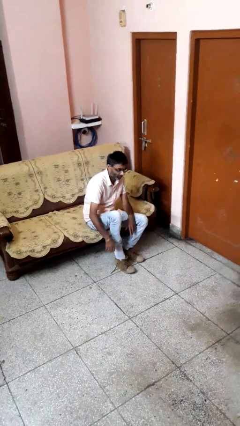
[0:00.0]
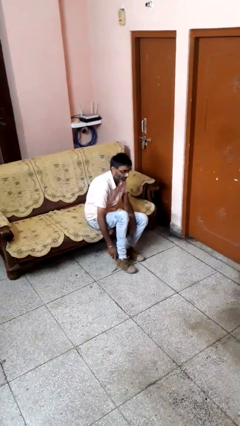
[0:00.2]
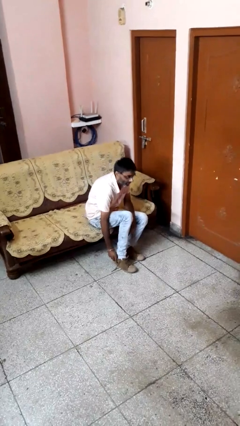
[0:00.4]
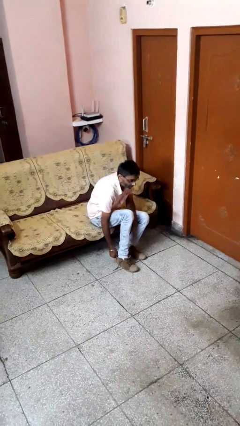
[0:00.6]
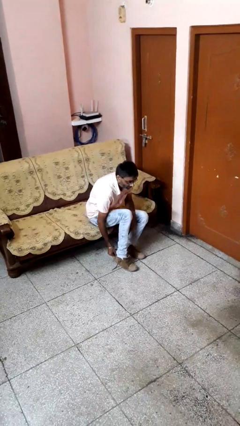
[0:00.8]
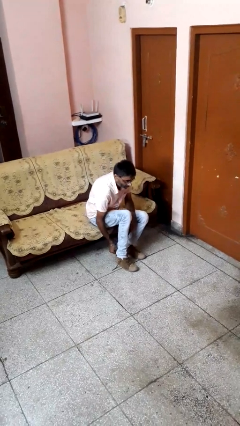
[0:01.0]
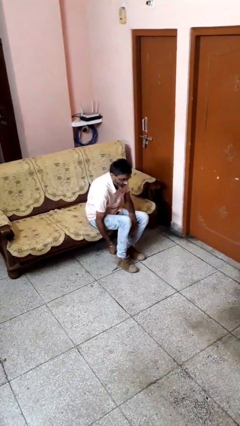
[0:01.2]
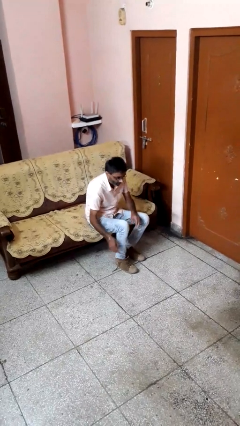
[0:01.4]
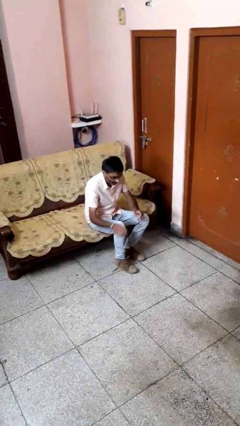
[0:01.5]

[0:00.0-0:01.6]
person puts on shoes

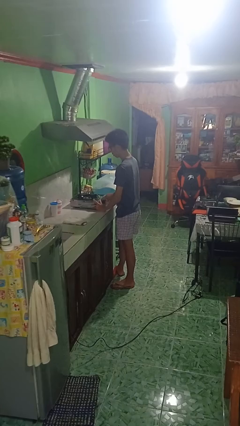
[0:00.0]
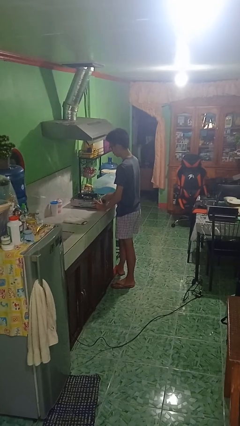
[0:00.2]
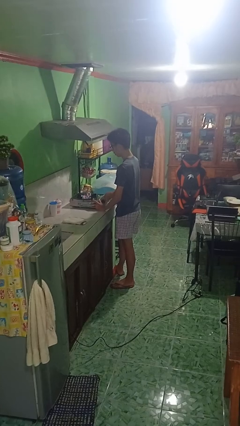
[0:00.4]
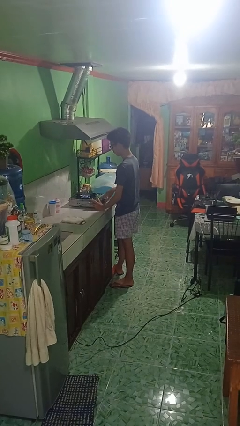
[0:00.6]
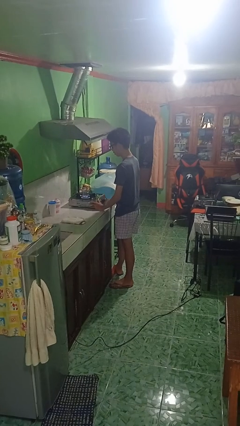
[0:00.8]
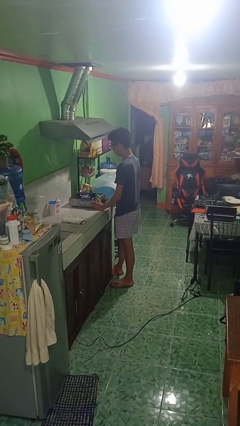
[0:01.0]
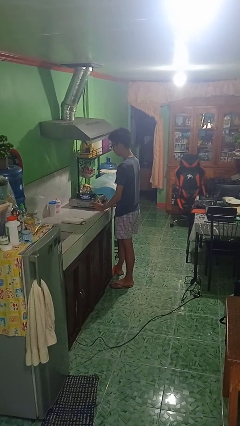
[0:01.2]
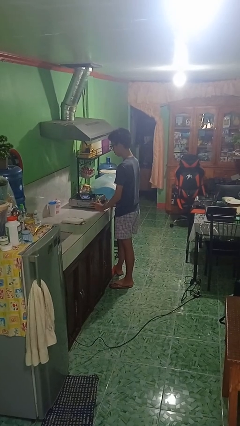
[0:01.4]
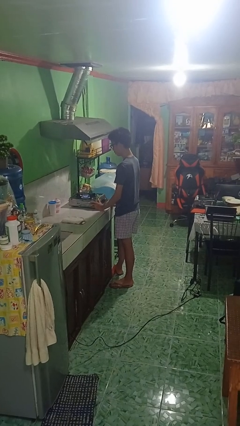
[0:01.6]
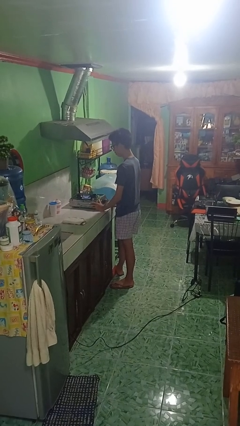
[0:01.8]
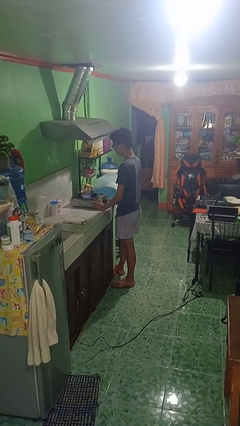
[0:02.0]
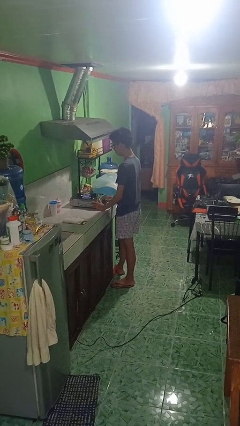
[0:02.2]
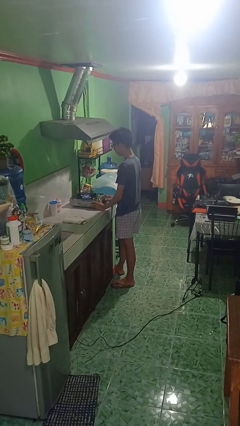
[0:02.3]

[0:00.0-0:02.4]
person turns on stovetop

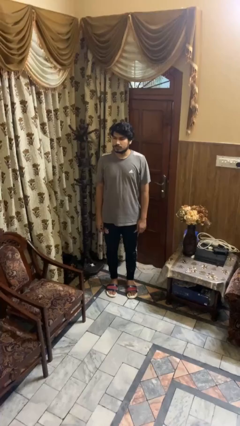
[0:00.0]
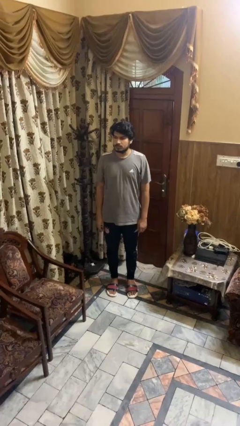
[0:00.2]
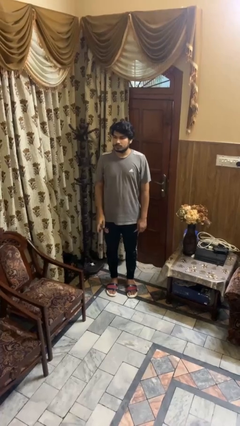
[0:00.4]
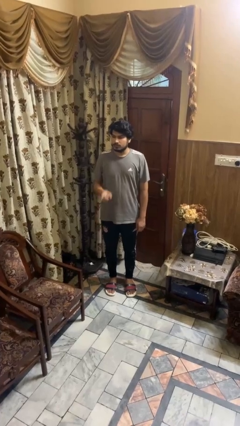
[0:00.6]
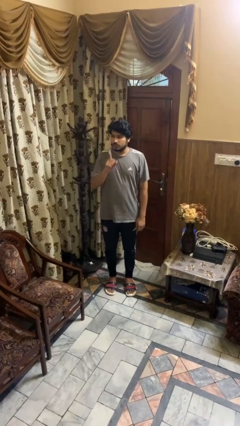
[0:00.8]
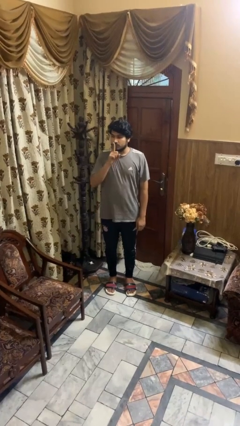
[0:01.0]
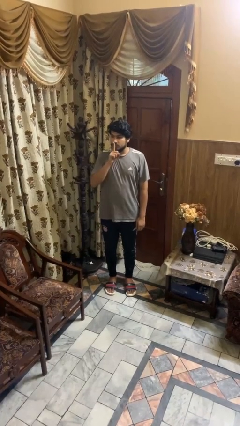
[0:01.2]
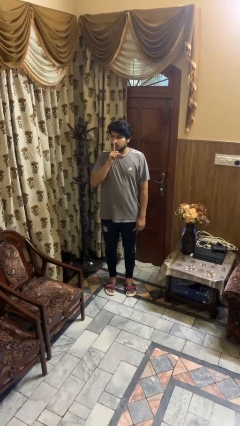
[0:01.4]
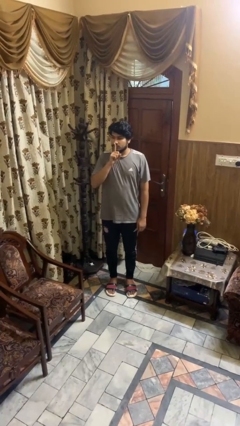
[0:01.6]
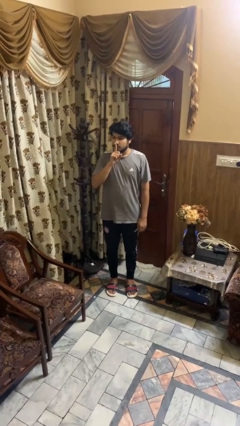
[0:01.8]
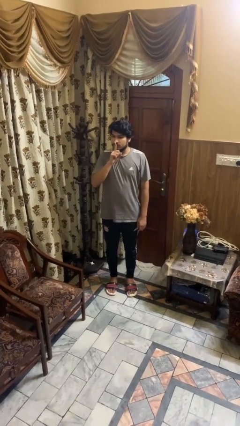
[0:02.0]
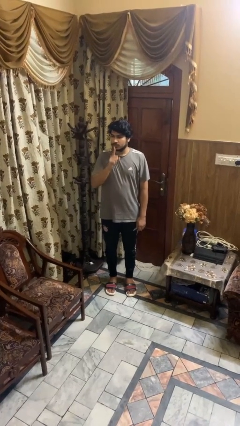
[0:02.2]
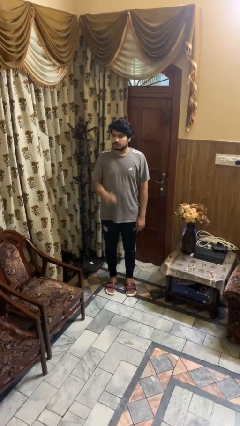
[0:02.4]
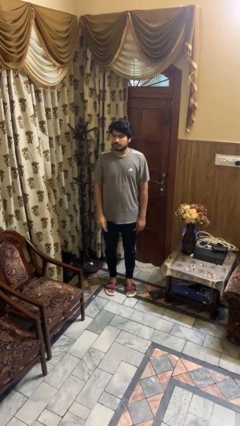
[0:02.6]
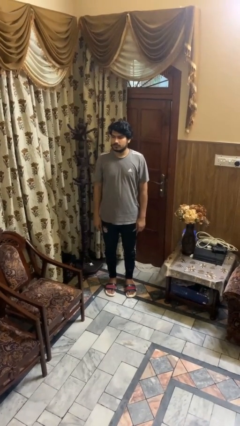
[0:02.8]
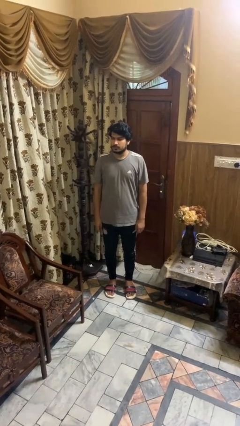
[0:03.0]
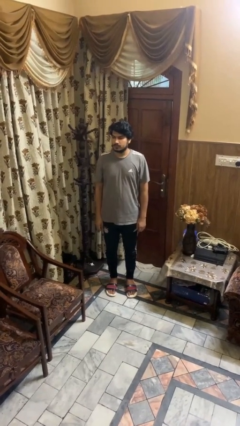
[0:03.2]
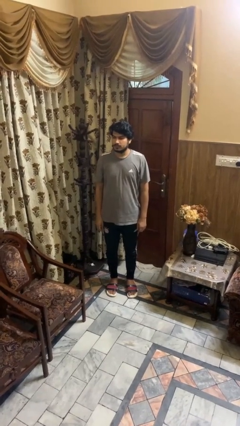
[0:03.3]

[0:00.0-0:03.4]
person gestures be quiet

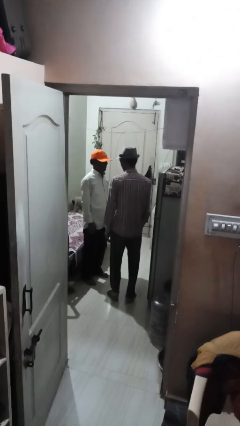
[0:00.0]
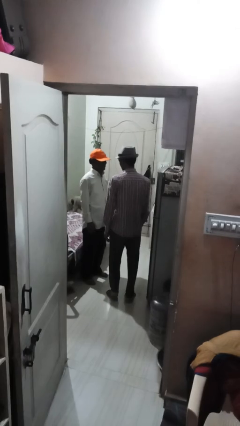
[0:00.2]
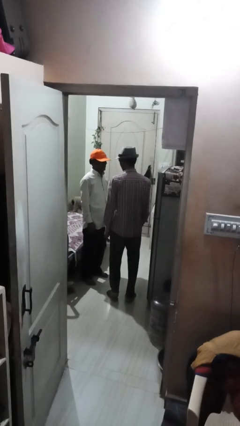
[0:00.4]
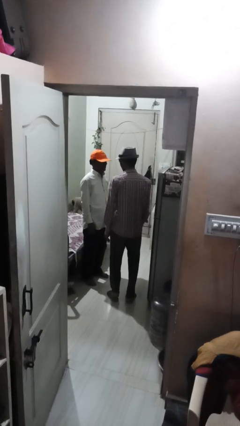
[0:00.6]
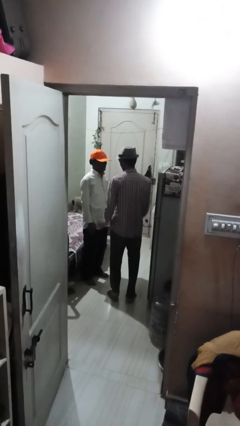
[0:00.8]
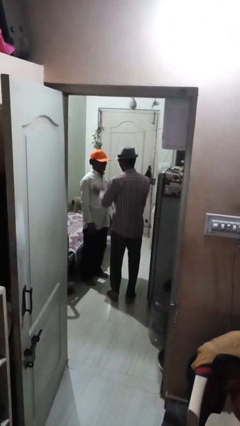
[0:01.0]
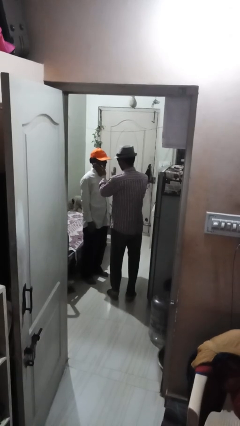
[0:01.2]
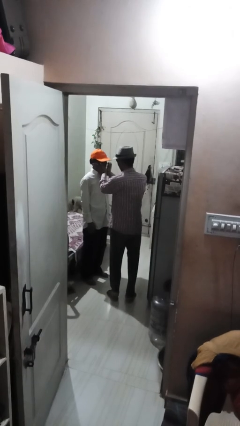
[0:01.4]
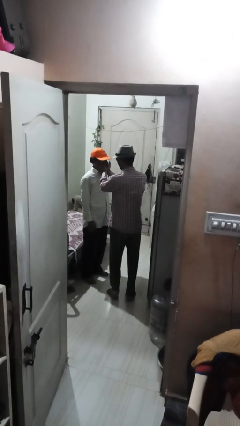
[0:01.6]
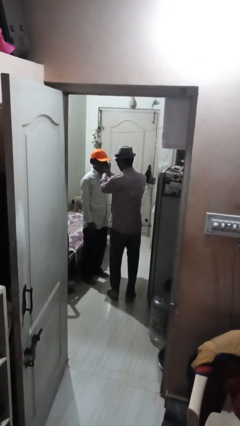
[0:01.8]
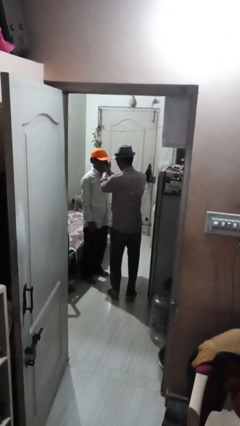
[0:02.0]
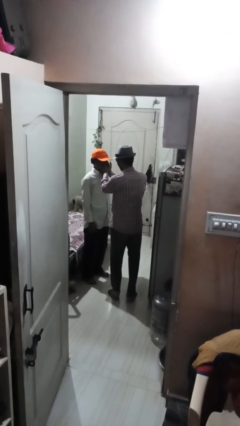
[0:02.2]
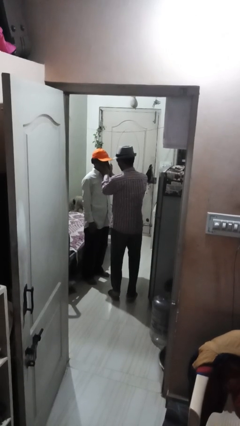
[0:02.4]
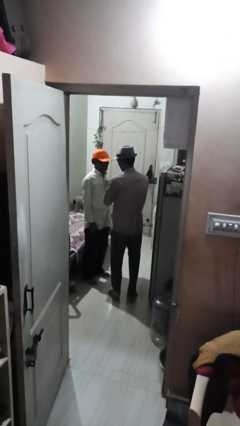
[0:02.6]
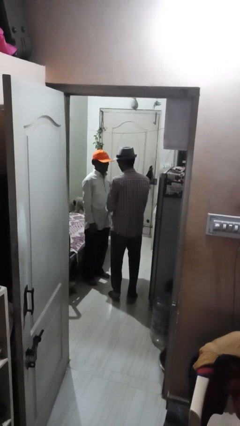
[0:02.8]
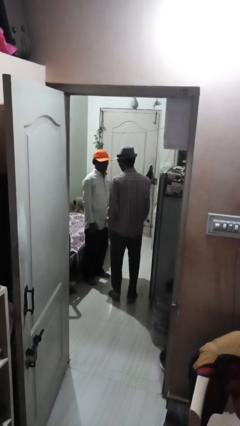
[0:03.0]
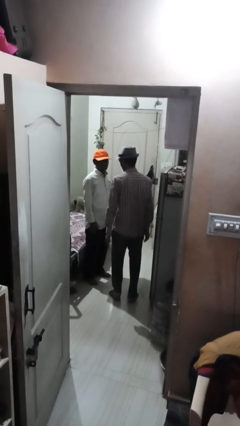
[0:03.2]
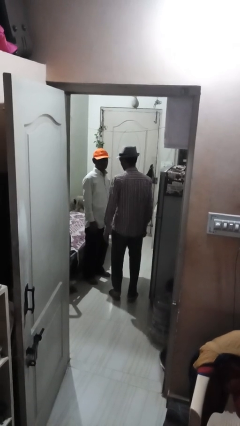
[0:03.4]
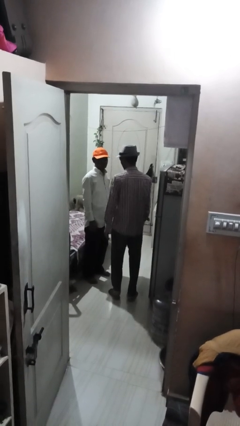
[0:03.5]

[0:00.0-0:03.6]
person touches face of person

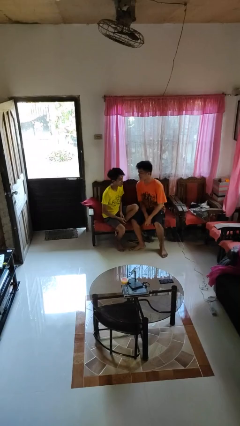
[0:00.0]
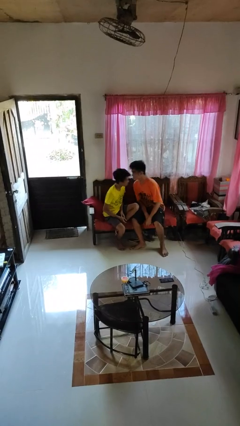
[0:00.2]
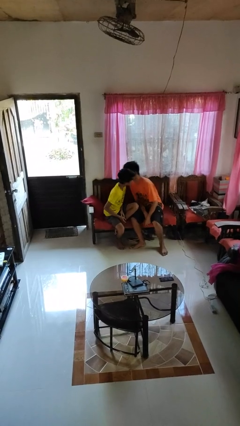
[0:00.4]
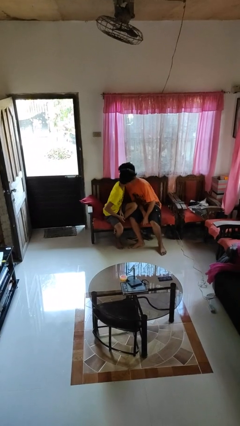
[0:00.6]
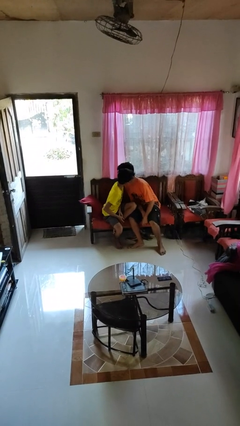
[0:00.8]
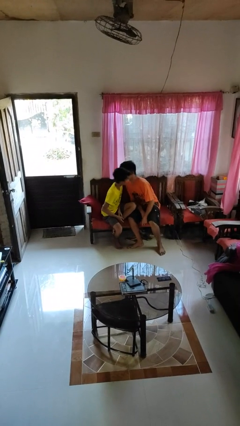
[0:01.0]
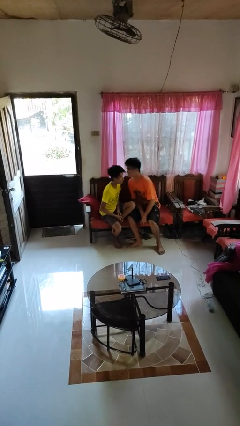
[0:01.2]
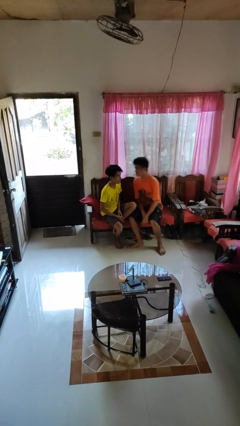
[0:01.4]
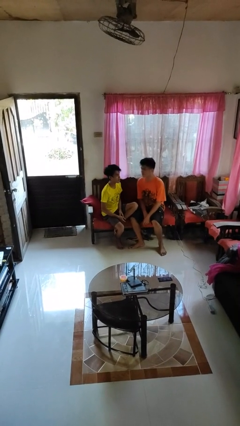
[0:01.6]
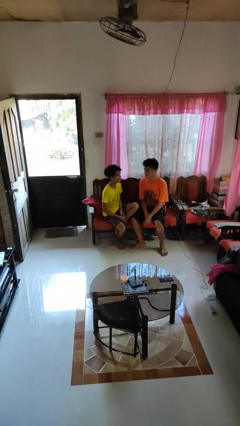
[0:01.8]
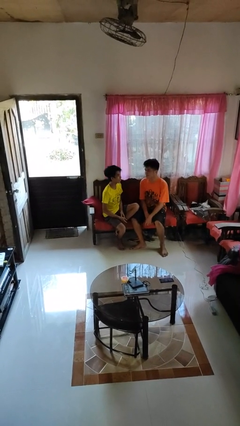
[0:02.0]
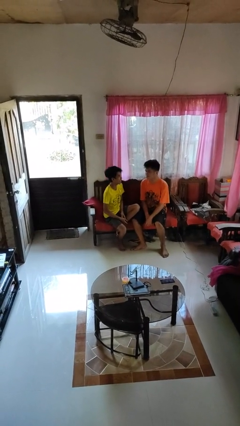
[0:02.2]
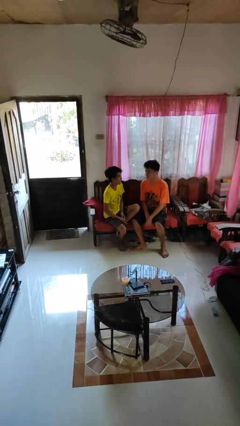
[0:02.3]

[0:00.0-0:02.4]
person kisses cheek of person

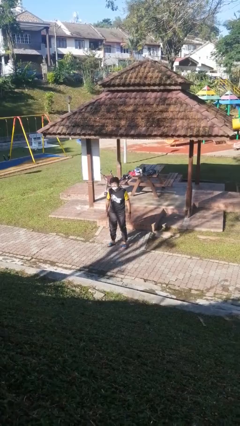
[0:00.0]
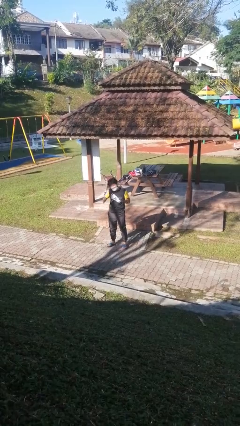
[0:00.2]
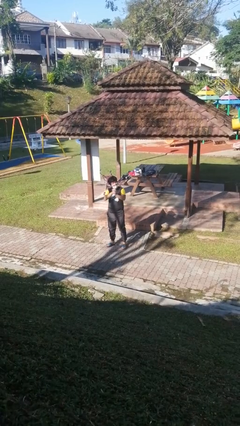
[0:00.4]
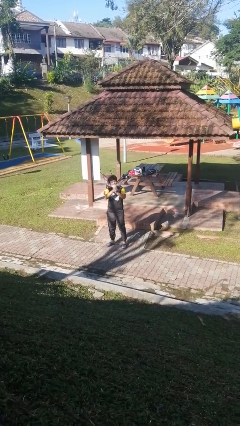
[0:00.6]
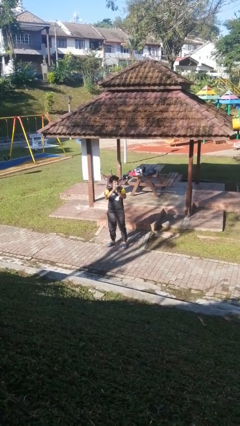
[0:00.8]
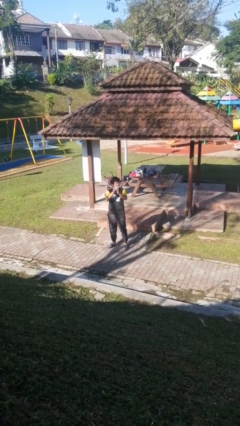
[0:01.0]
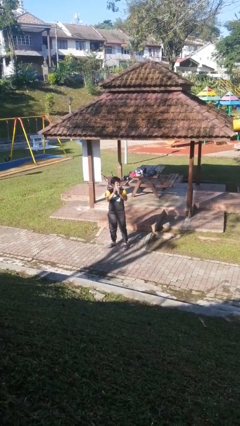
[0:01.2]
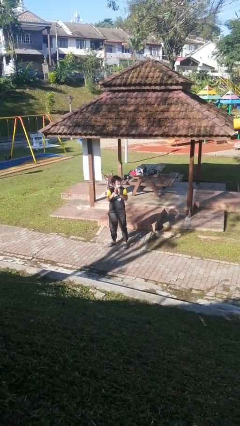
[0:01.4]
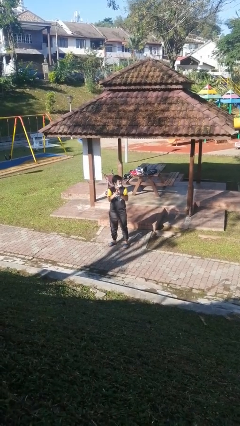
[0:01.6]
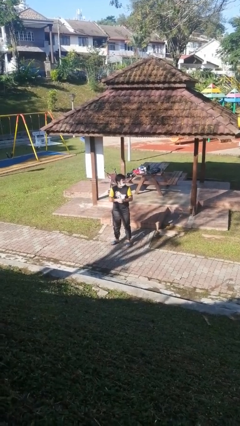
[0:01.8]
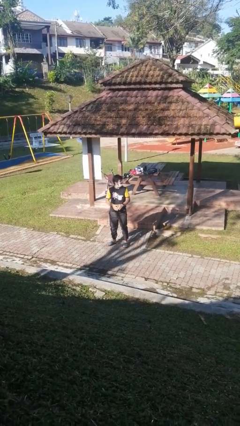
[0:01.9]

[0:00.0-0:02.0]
person claps hands

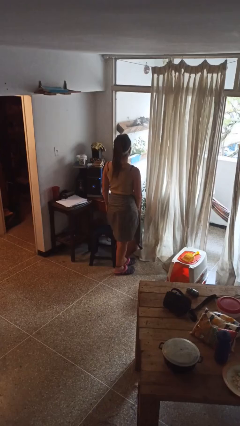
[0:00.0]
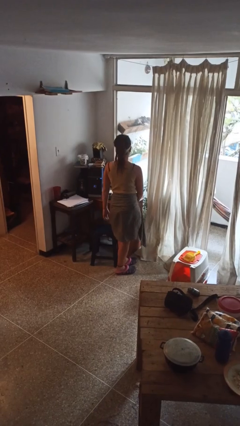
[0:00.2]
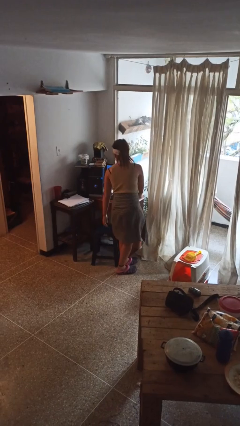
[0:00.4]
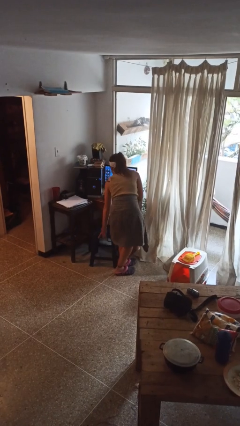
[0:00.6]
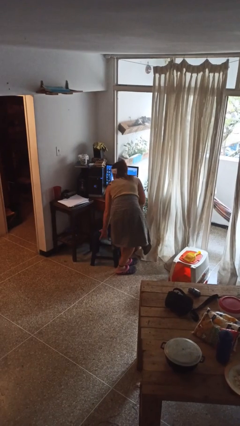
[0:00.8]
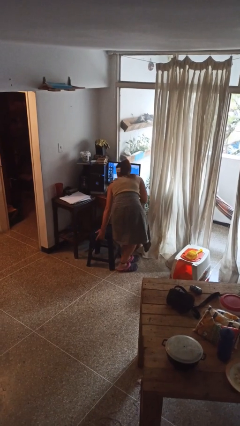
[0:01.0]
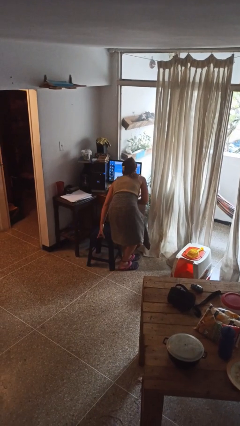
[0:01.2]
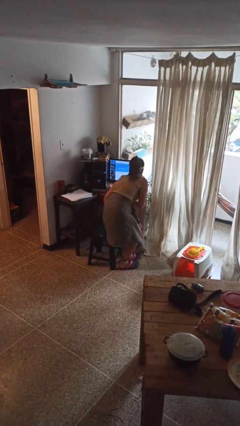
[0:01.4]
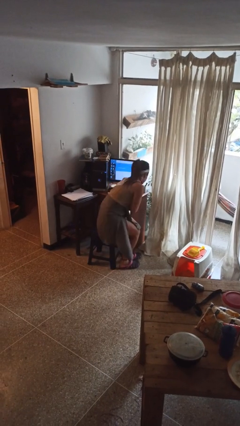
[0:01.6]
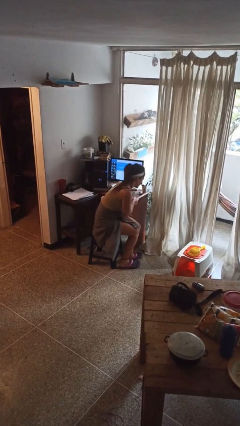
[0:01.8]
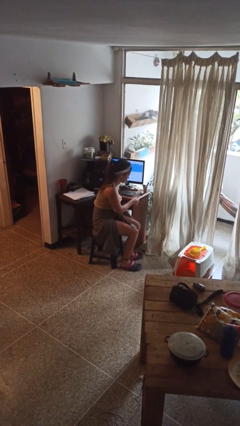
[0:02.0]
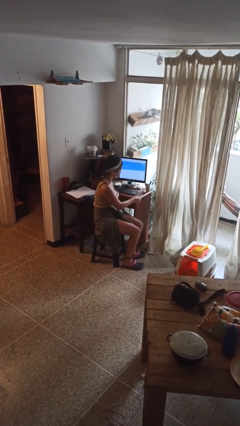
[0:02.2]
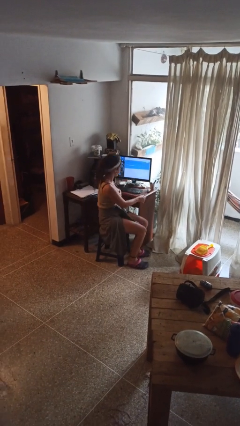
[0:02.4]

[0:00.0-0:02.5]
person sits down
